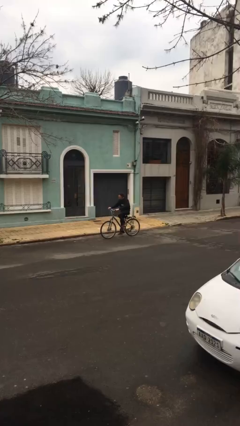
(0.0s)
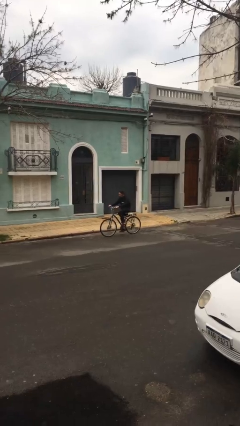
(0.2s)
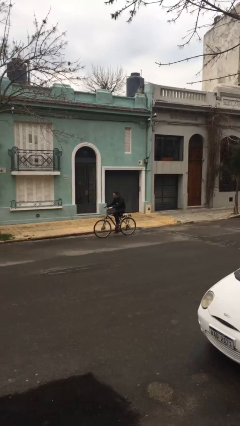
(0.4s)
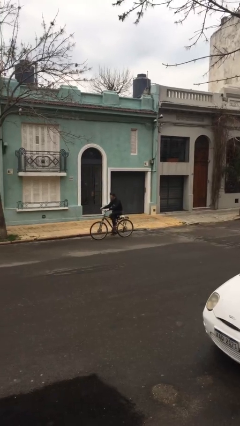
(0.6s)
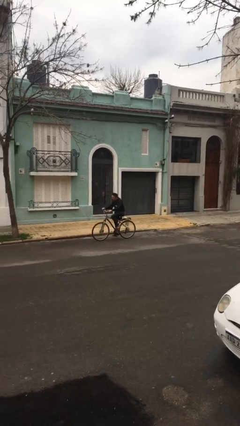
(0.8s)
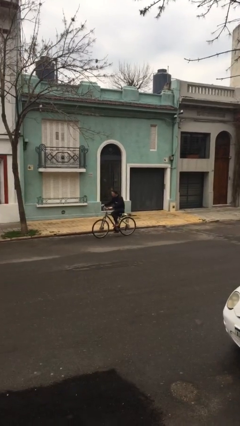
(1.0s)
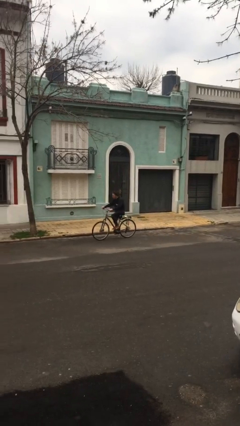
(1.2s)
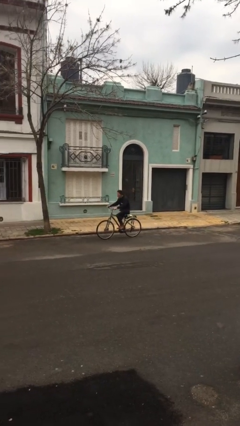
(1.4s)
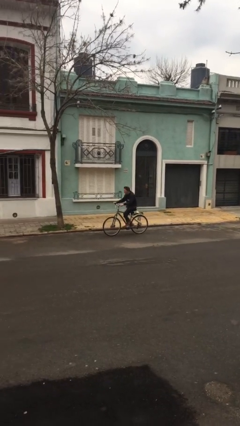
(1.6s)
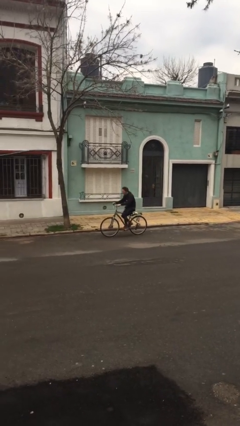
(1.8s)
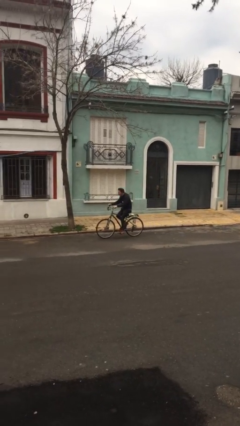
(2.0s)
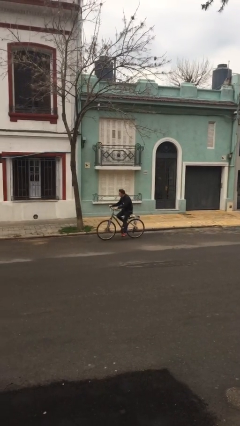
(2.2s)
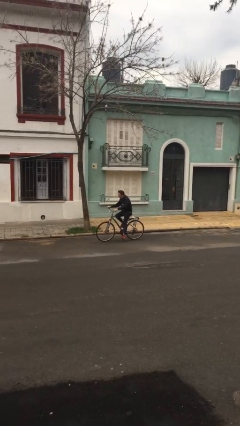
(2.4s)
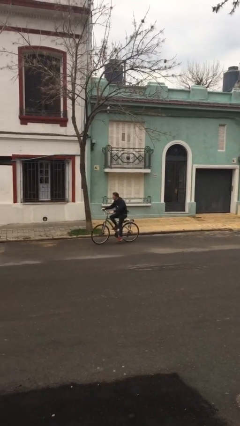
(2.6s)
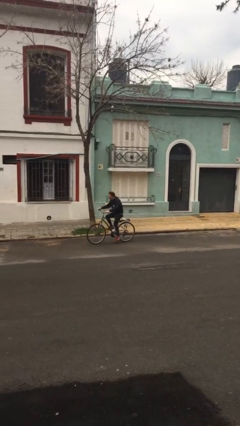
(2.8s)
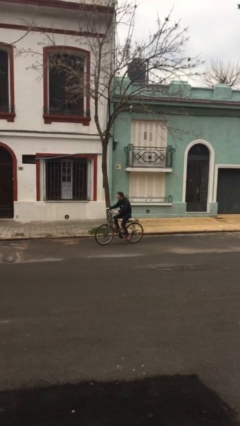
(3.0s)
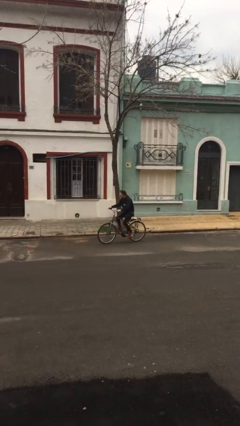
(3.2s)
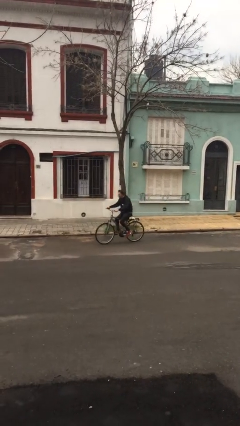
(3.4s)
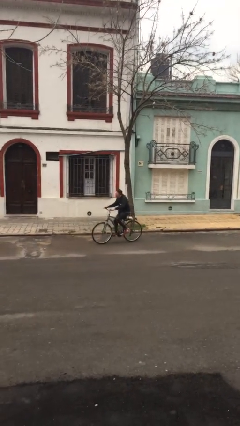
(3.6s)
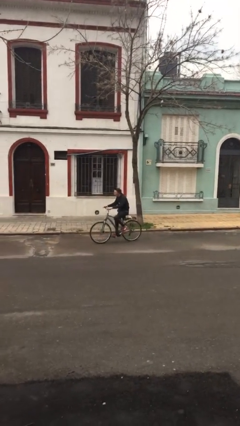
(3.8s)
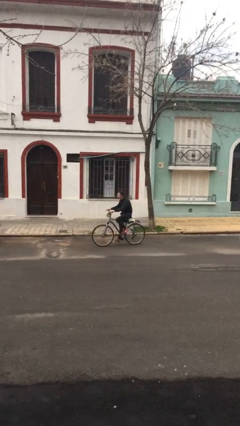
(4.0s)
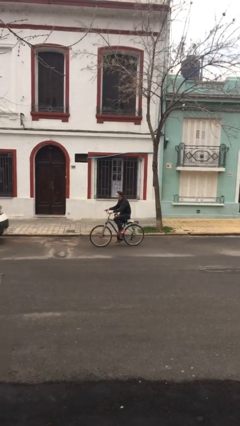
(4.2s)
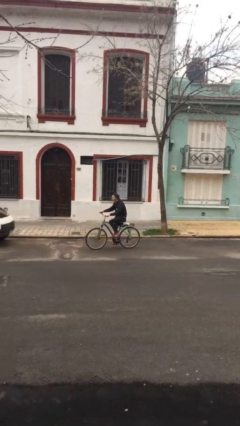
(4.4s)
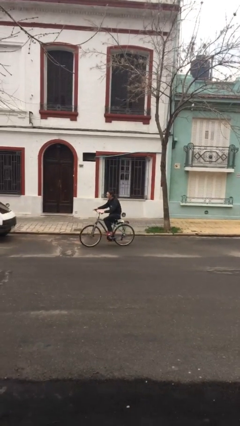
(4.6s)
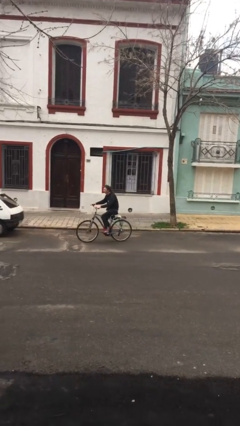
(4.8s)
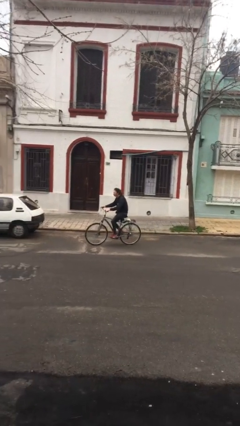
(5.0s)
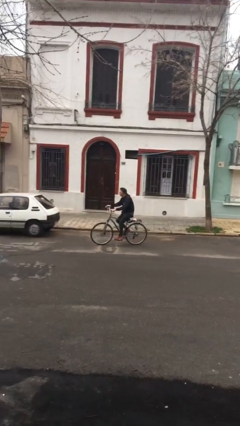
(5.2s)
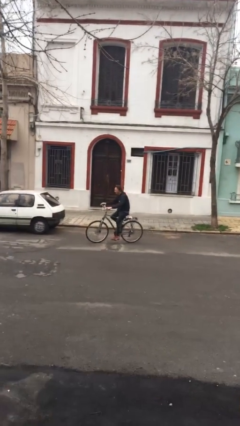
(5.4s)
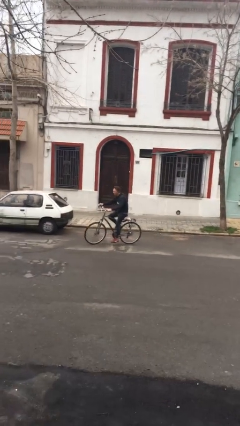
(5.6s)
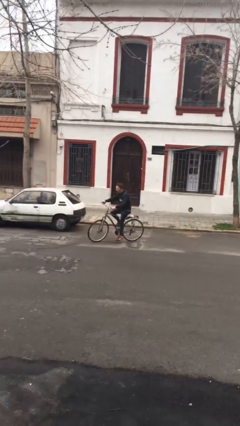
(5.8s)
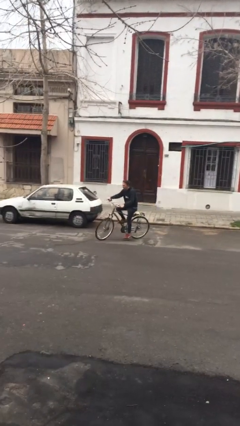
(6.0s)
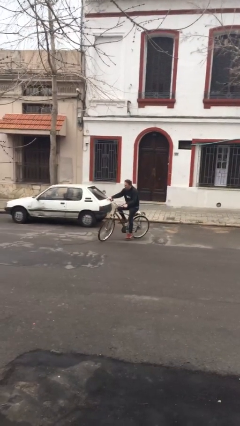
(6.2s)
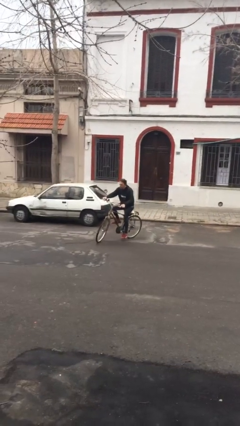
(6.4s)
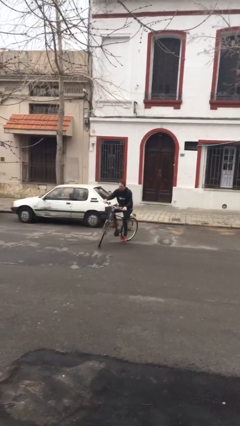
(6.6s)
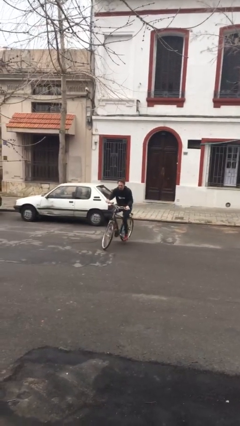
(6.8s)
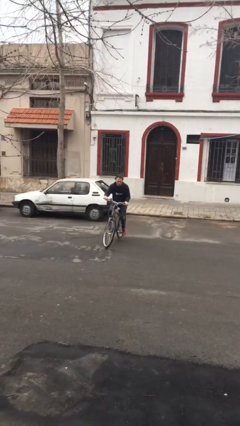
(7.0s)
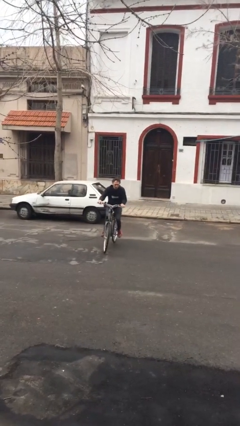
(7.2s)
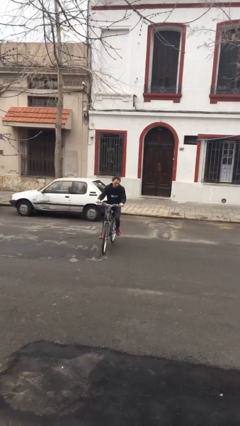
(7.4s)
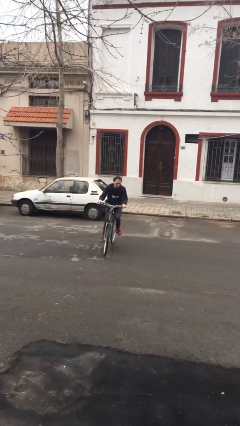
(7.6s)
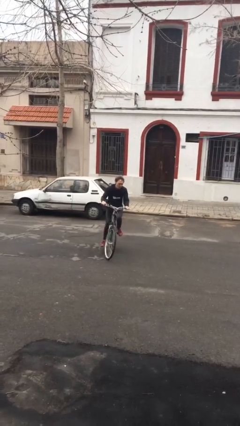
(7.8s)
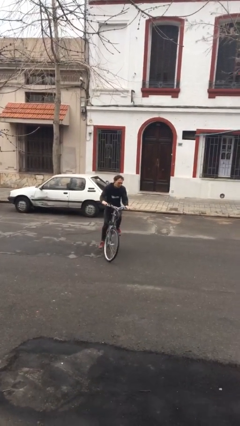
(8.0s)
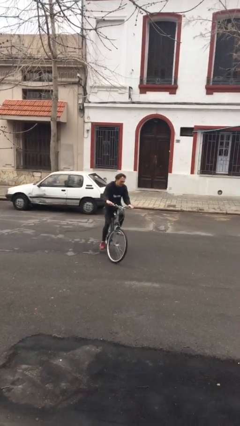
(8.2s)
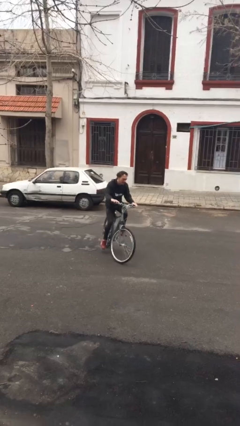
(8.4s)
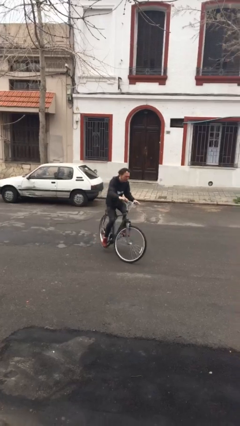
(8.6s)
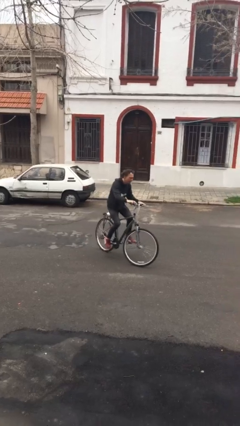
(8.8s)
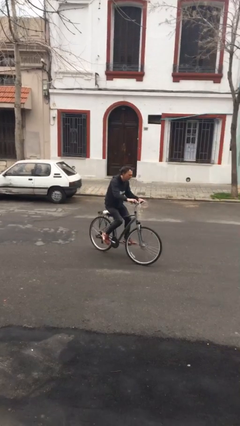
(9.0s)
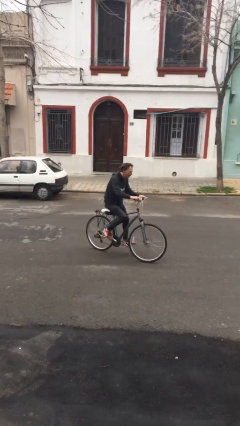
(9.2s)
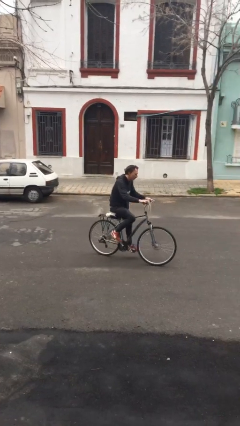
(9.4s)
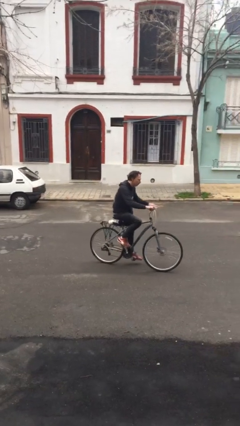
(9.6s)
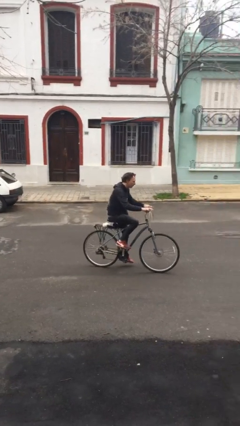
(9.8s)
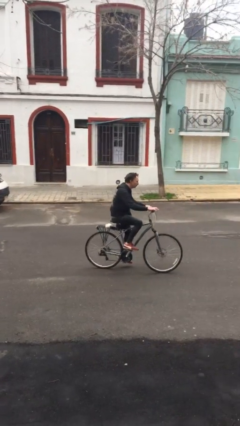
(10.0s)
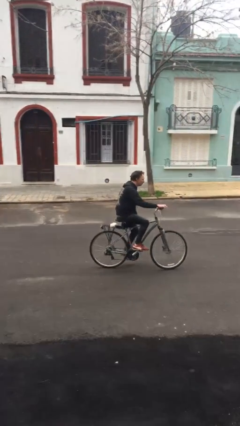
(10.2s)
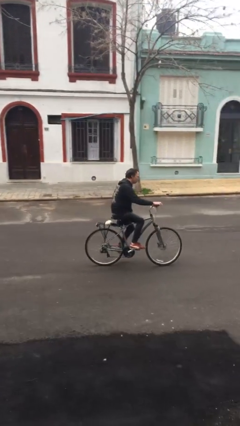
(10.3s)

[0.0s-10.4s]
person rides bicycle

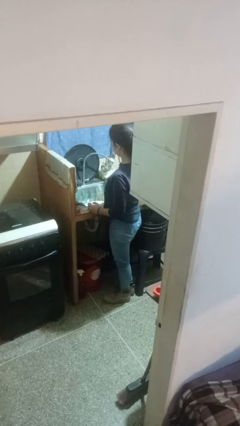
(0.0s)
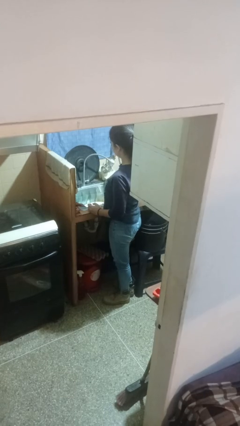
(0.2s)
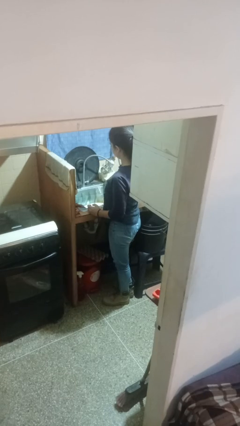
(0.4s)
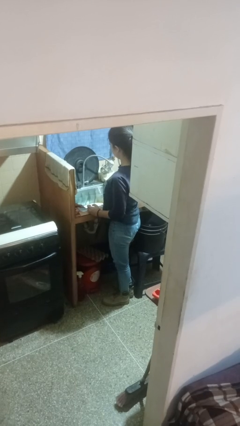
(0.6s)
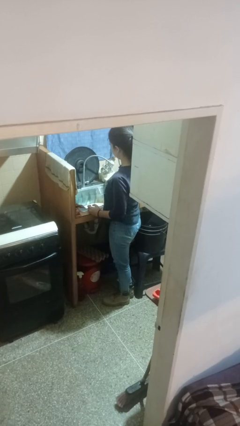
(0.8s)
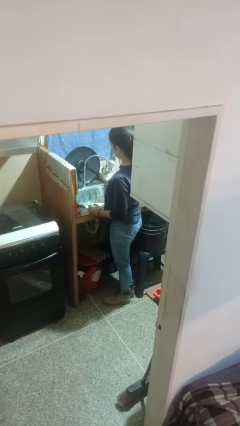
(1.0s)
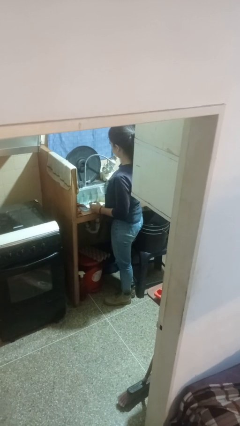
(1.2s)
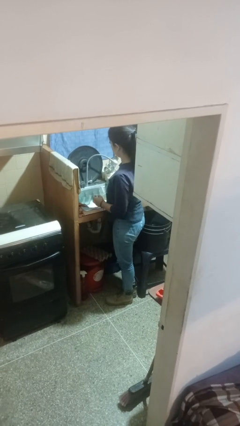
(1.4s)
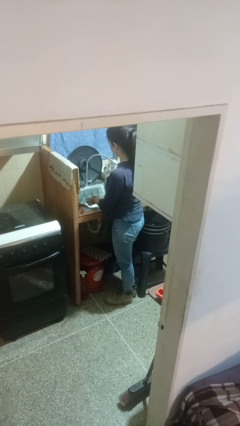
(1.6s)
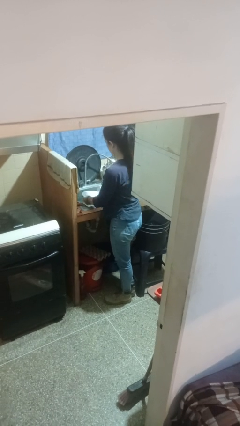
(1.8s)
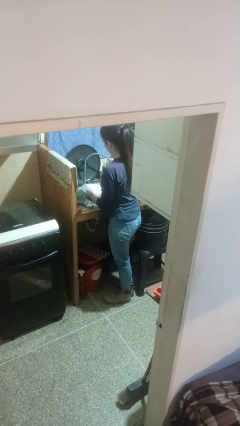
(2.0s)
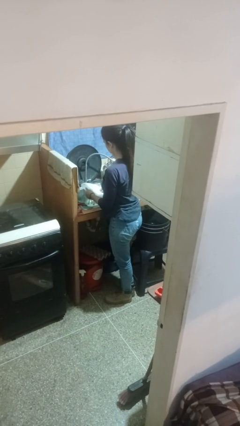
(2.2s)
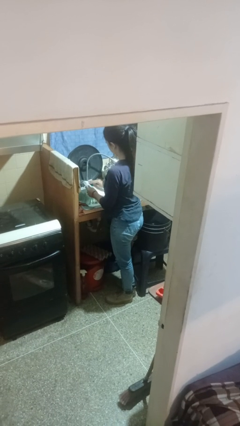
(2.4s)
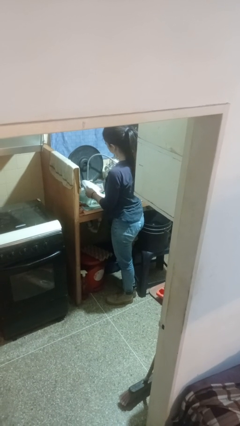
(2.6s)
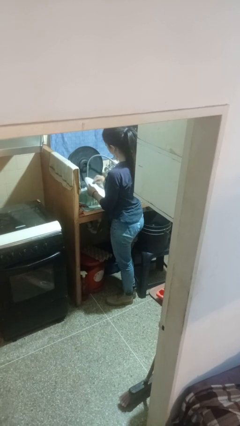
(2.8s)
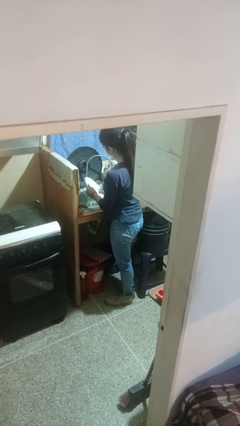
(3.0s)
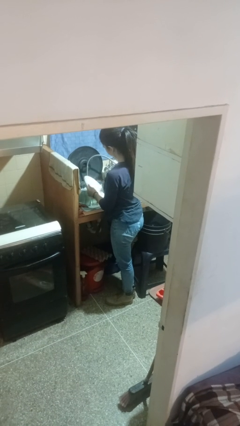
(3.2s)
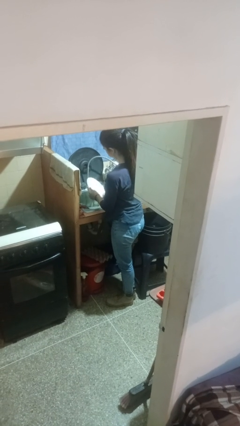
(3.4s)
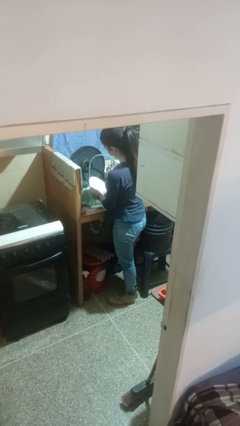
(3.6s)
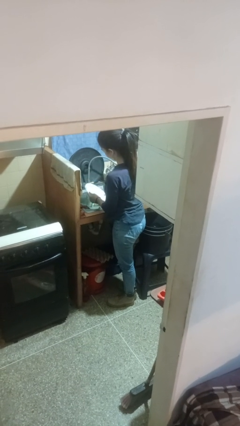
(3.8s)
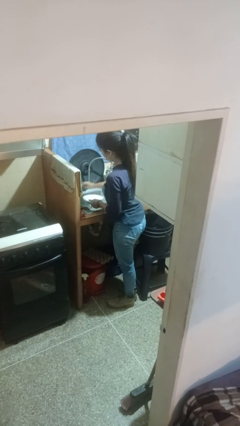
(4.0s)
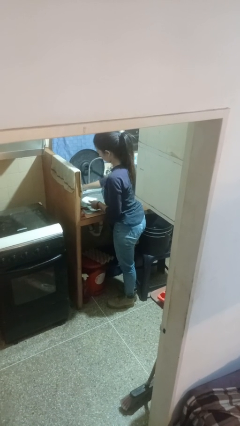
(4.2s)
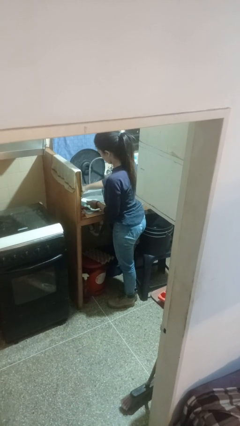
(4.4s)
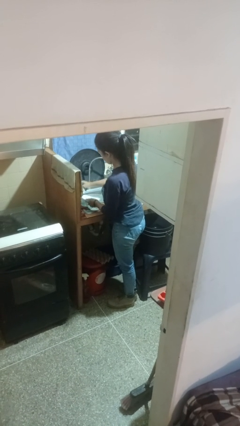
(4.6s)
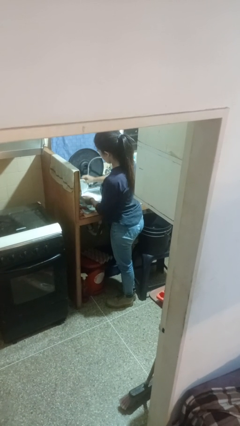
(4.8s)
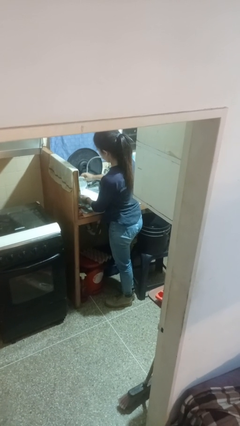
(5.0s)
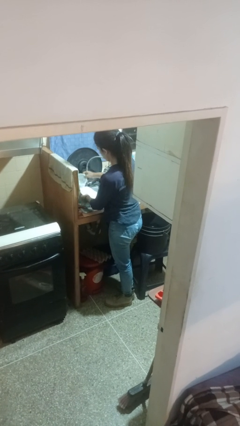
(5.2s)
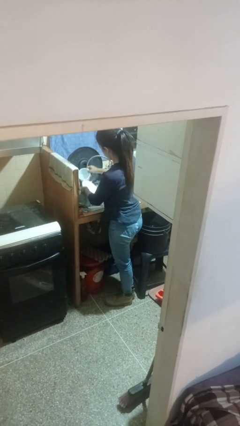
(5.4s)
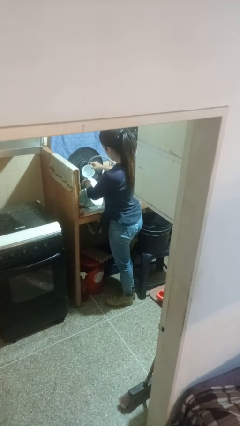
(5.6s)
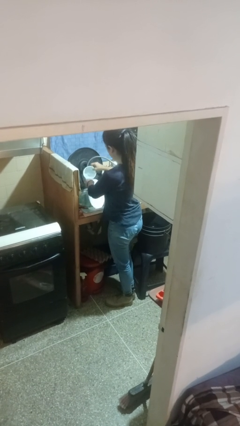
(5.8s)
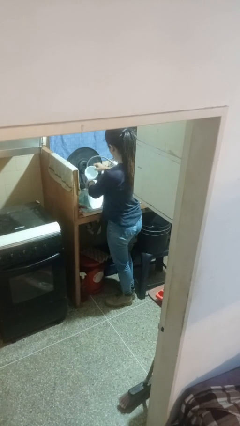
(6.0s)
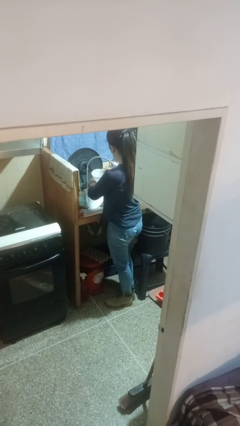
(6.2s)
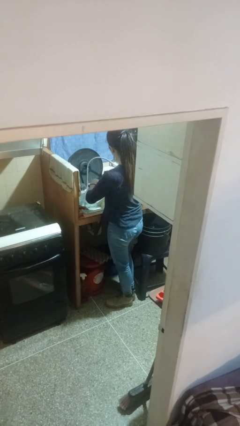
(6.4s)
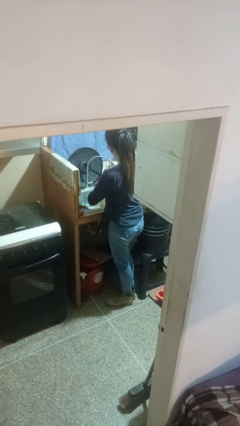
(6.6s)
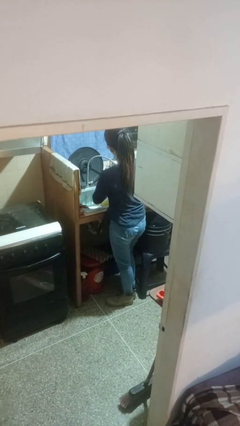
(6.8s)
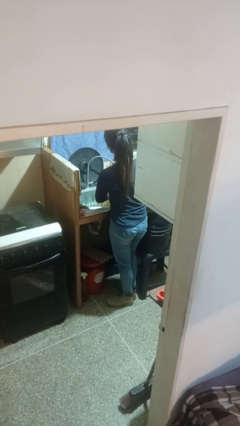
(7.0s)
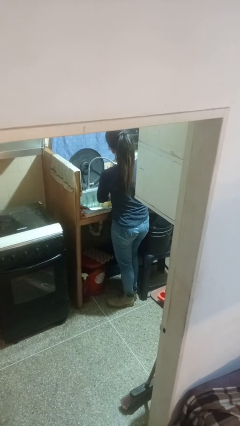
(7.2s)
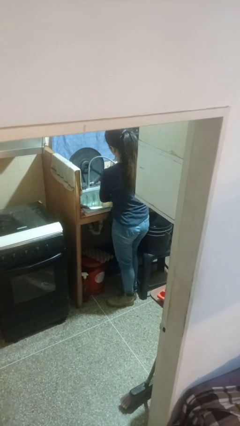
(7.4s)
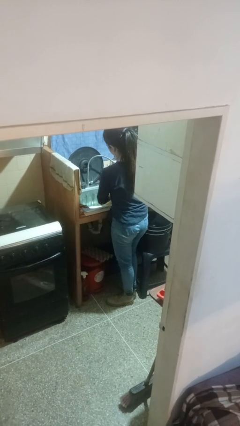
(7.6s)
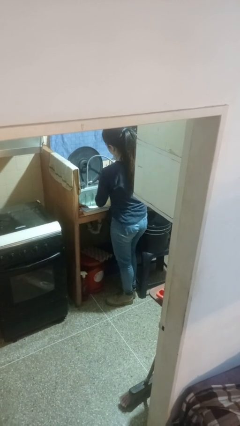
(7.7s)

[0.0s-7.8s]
person washes dish
